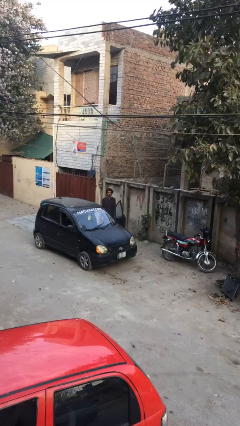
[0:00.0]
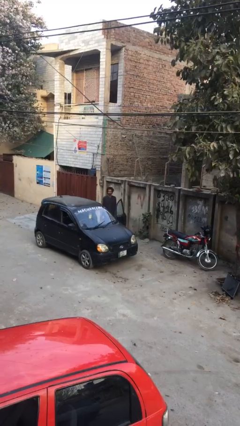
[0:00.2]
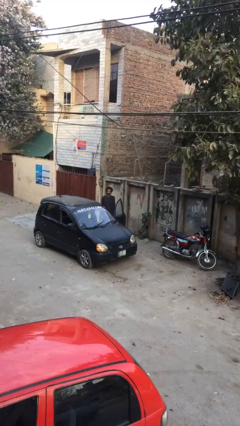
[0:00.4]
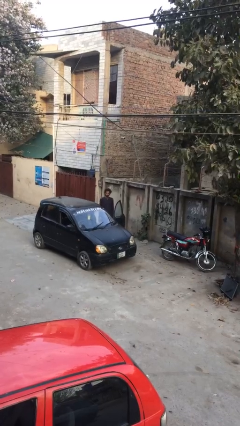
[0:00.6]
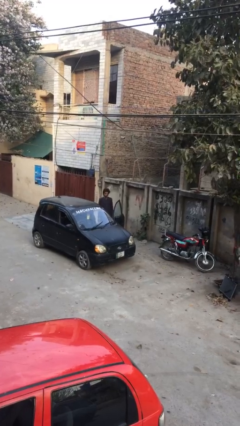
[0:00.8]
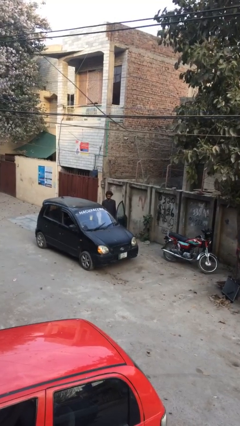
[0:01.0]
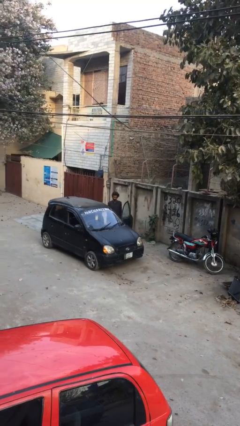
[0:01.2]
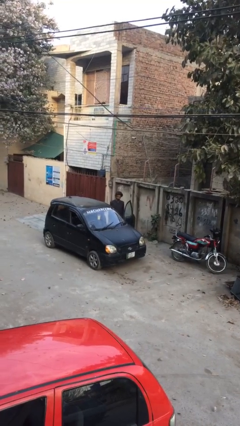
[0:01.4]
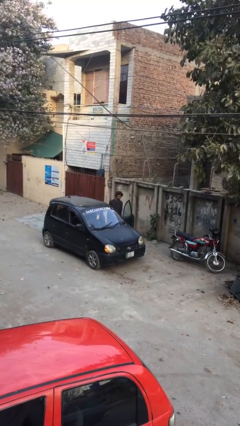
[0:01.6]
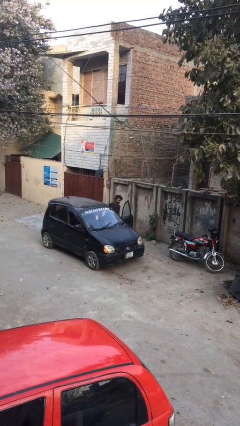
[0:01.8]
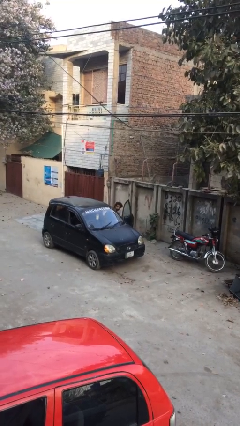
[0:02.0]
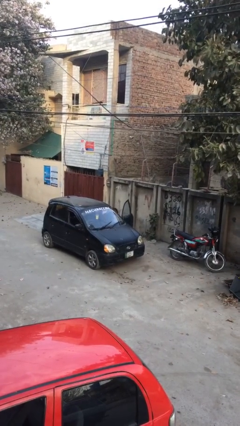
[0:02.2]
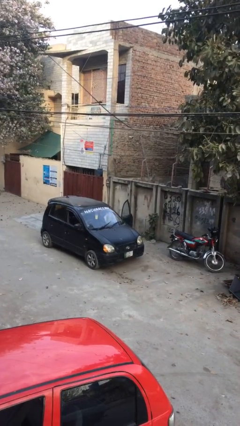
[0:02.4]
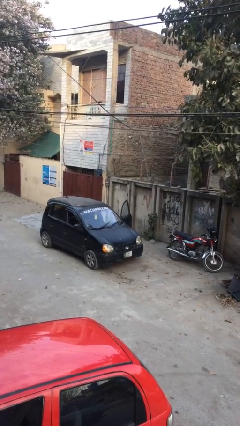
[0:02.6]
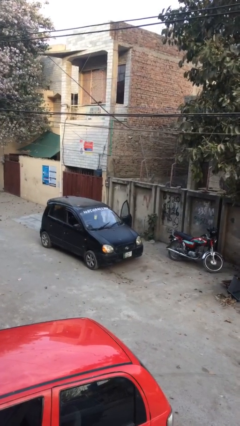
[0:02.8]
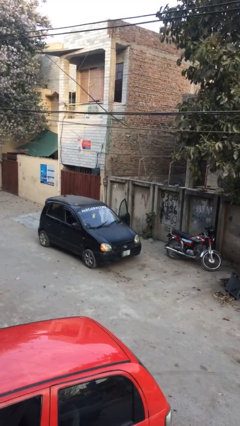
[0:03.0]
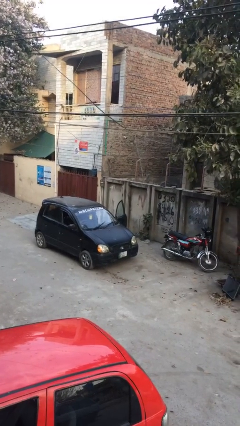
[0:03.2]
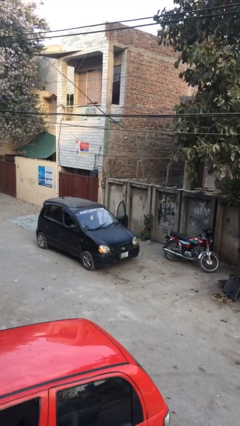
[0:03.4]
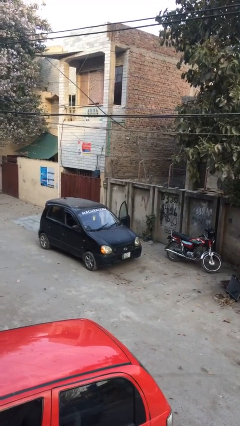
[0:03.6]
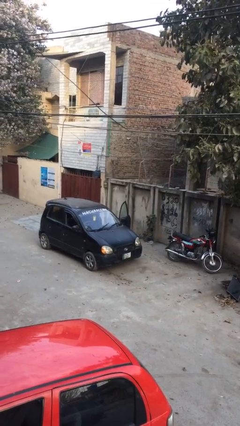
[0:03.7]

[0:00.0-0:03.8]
person enters car

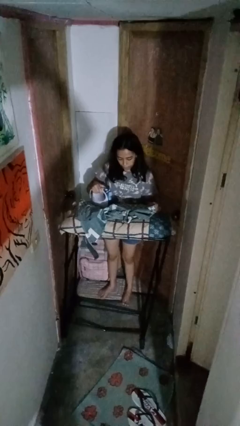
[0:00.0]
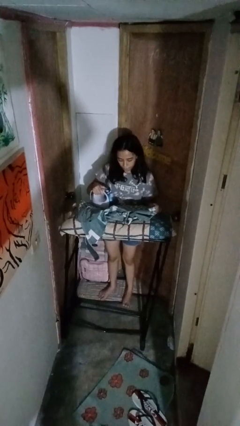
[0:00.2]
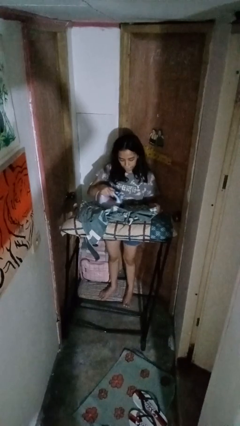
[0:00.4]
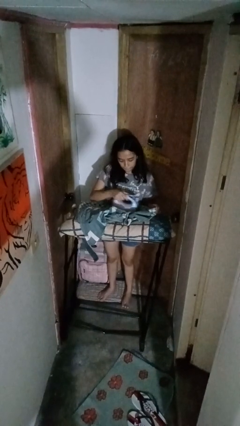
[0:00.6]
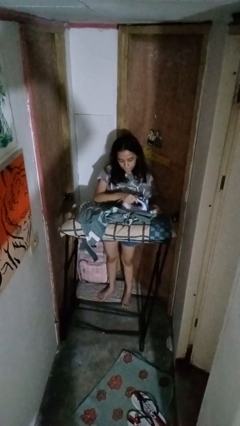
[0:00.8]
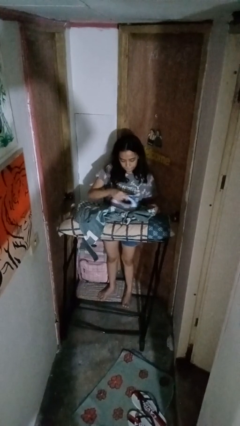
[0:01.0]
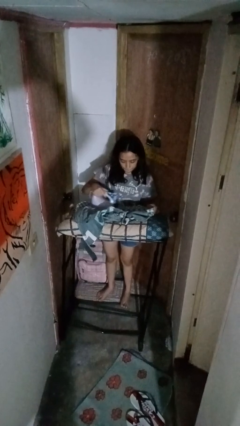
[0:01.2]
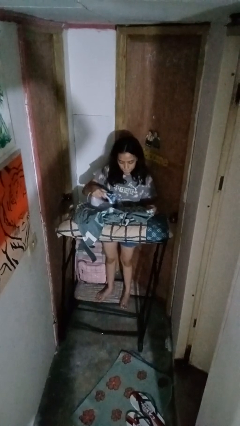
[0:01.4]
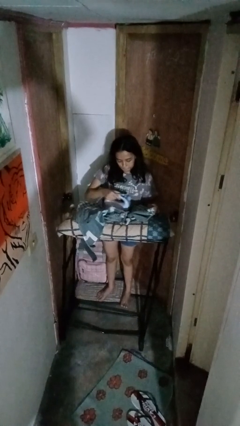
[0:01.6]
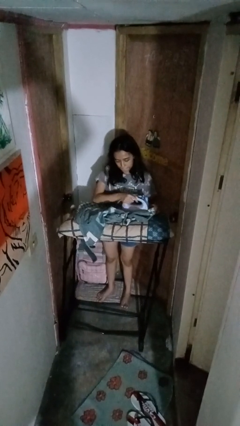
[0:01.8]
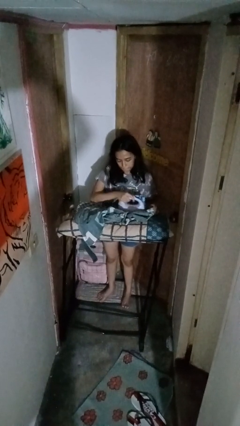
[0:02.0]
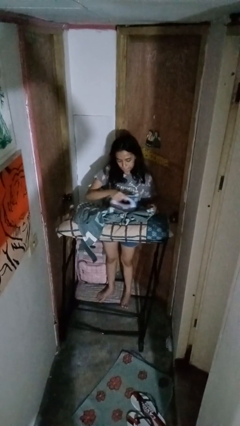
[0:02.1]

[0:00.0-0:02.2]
person irons clothes

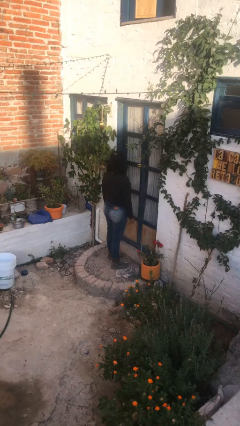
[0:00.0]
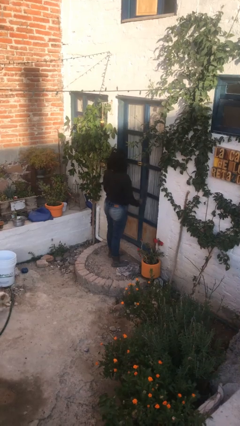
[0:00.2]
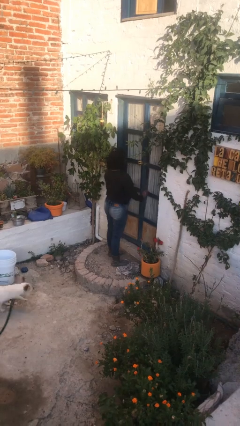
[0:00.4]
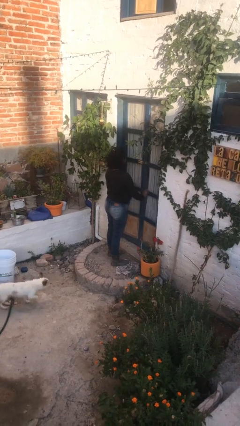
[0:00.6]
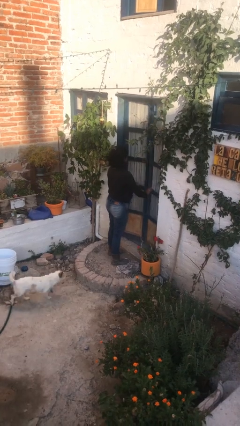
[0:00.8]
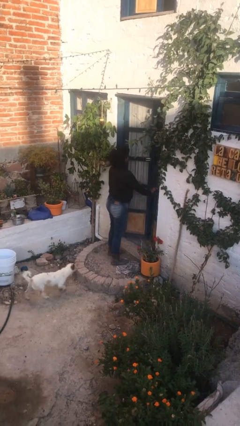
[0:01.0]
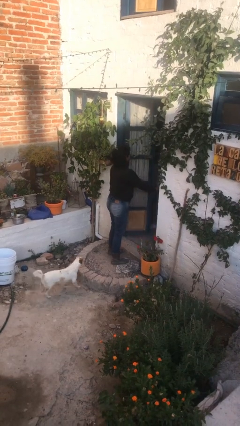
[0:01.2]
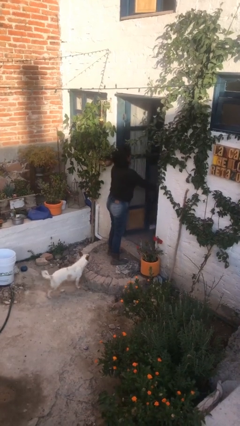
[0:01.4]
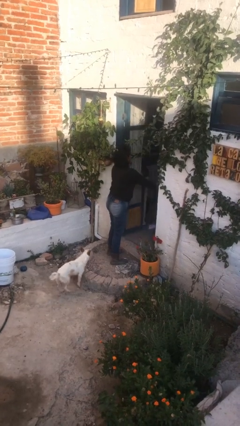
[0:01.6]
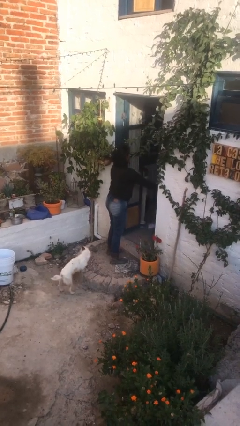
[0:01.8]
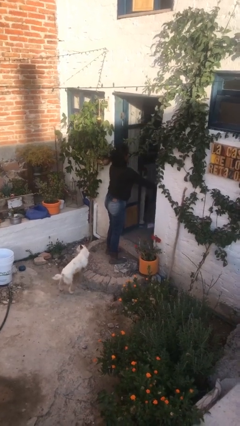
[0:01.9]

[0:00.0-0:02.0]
person opens facility door

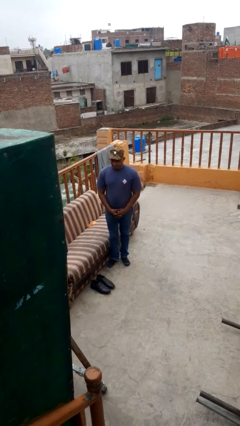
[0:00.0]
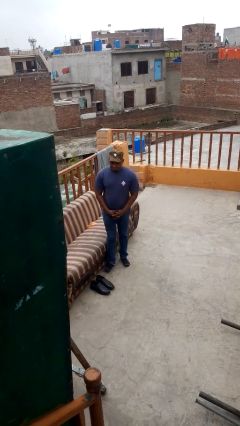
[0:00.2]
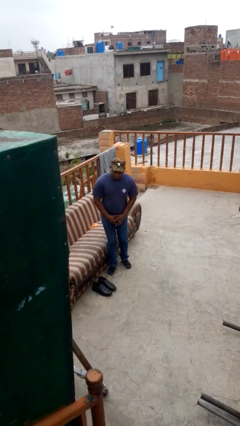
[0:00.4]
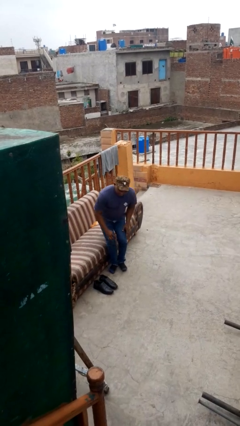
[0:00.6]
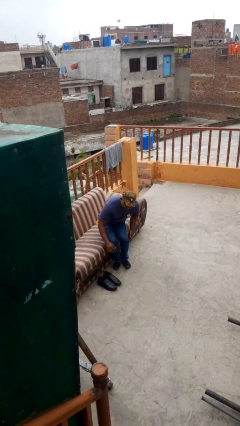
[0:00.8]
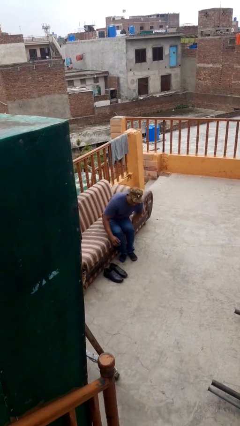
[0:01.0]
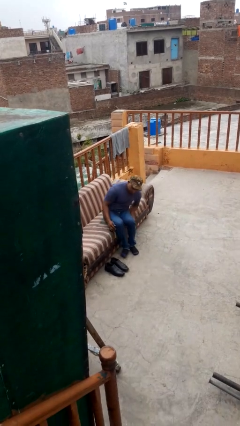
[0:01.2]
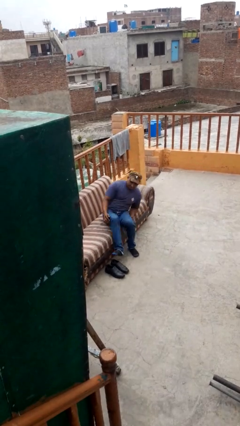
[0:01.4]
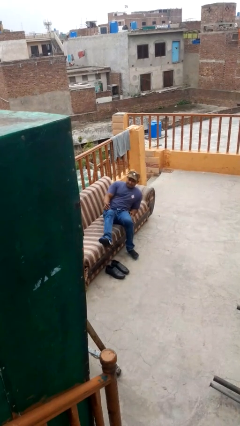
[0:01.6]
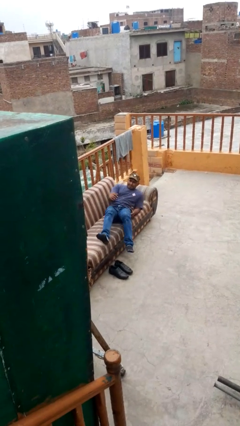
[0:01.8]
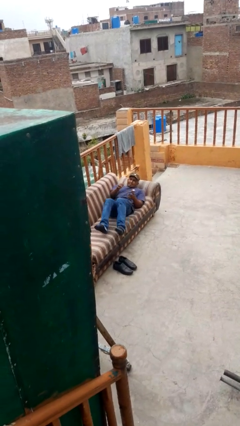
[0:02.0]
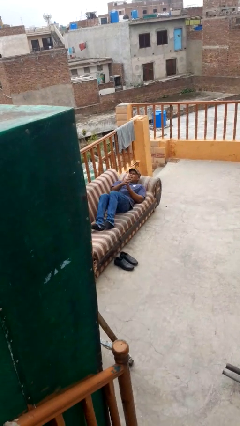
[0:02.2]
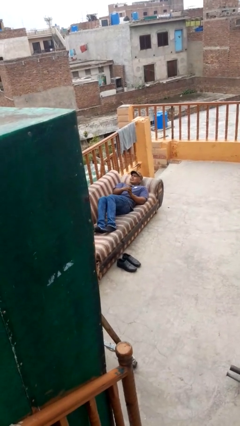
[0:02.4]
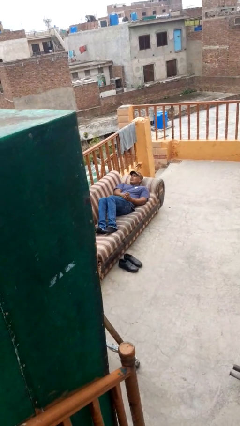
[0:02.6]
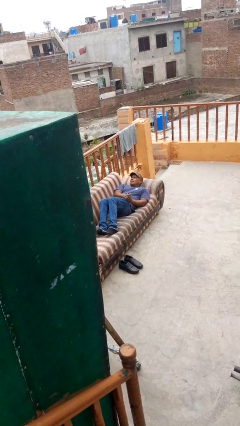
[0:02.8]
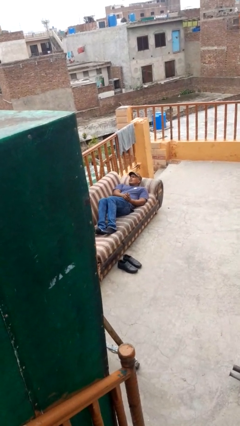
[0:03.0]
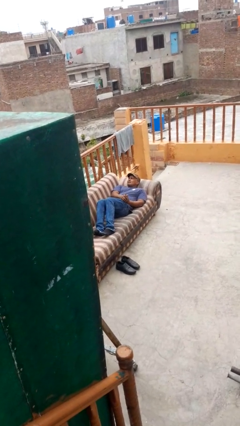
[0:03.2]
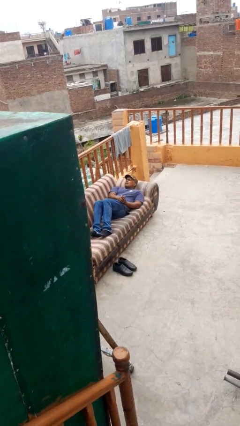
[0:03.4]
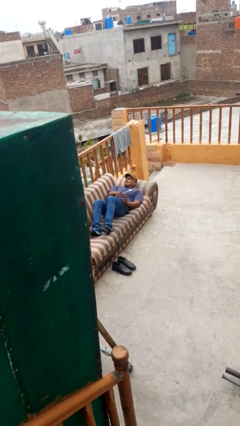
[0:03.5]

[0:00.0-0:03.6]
person lies down on couch

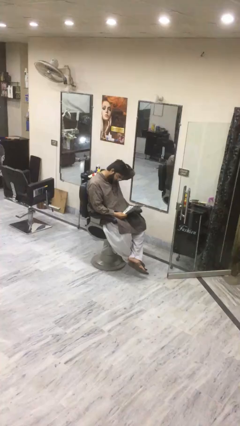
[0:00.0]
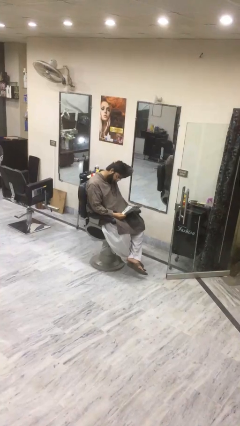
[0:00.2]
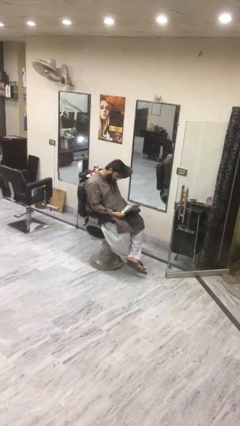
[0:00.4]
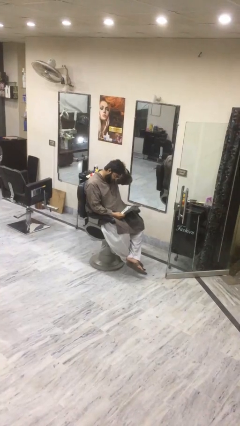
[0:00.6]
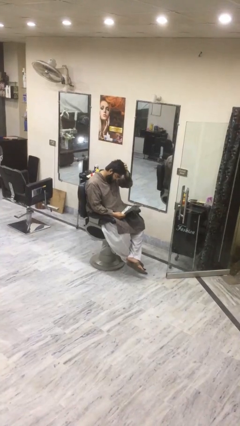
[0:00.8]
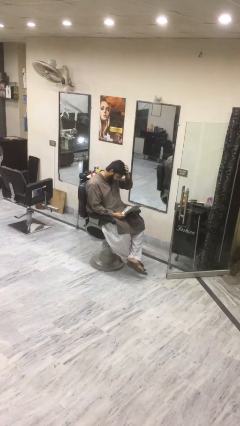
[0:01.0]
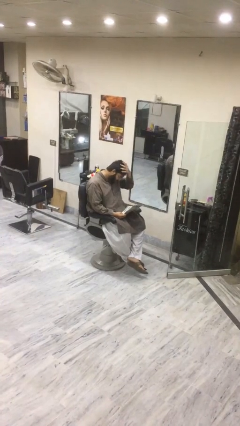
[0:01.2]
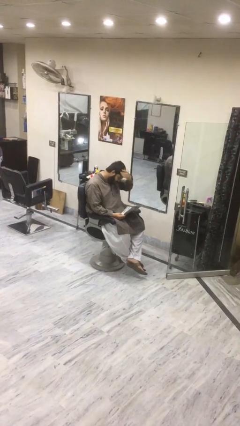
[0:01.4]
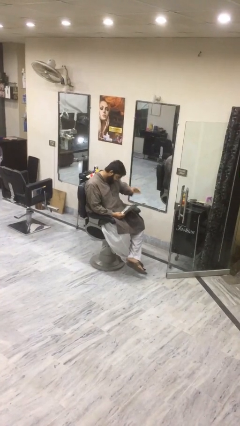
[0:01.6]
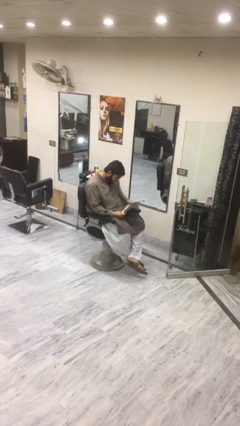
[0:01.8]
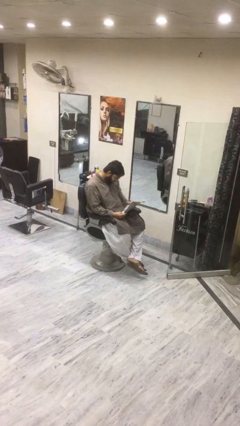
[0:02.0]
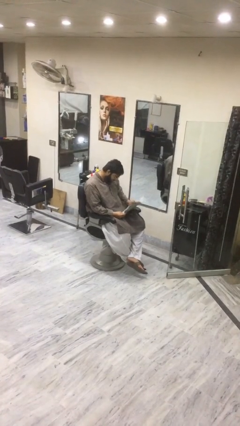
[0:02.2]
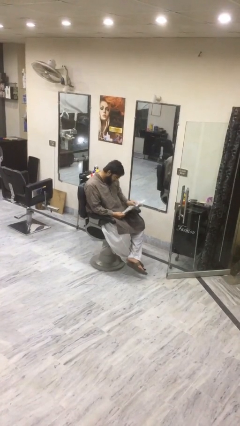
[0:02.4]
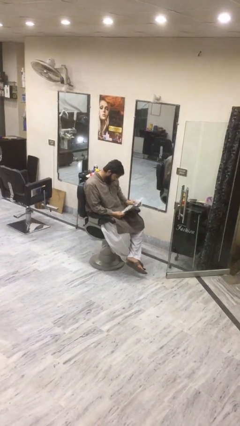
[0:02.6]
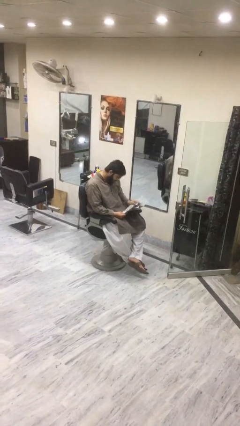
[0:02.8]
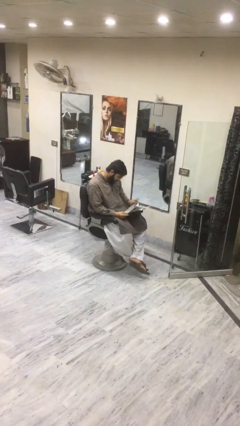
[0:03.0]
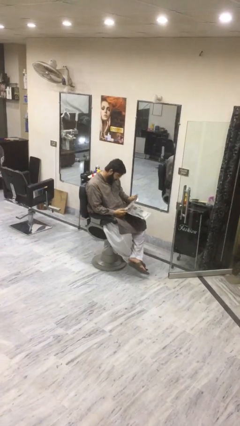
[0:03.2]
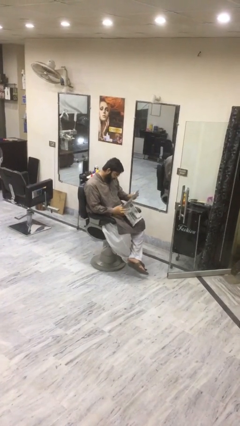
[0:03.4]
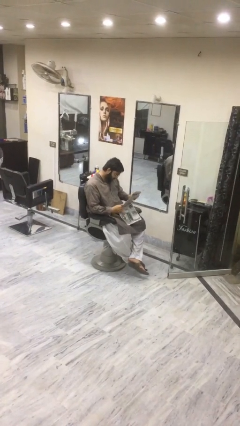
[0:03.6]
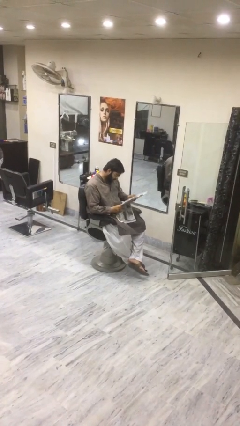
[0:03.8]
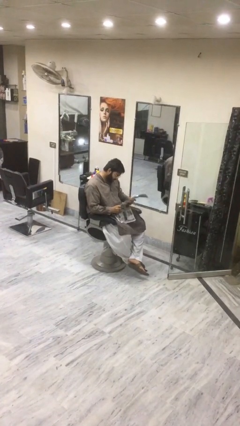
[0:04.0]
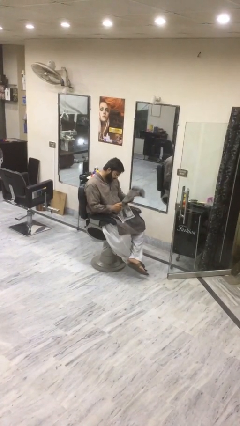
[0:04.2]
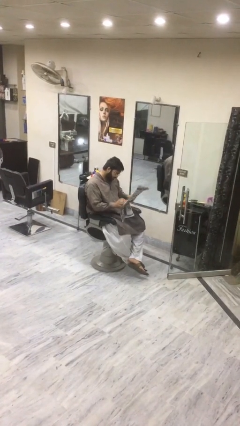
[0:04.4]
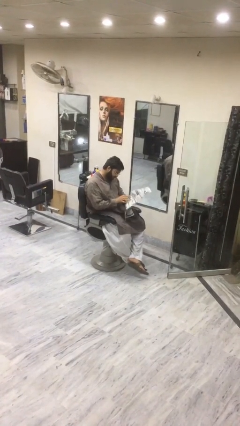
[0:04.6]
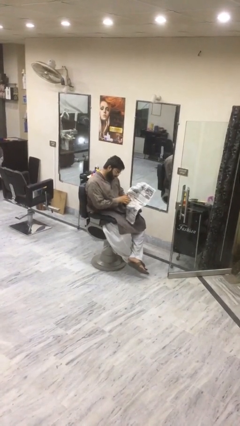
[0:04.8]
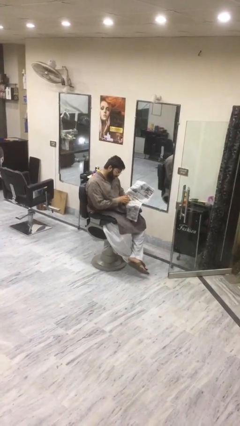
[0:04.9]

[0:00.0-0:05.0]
person reads document

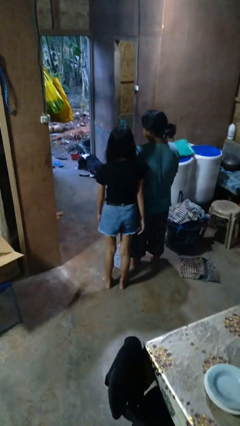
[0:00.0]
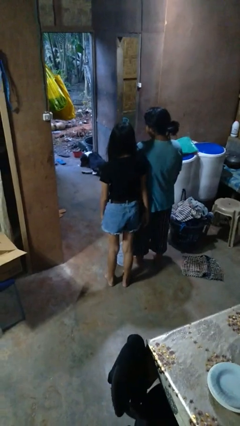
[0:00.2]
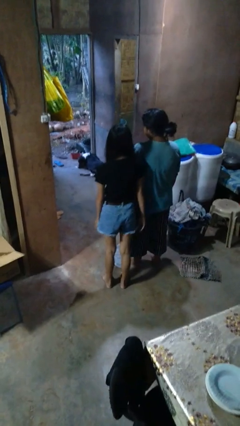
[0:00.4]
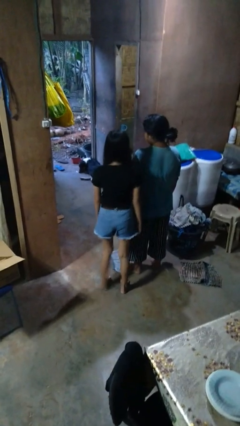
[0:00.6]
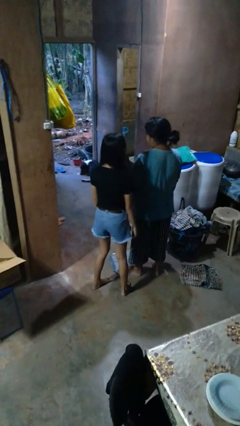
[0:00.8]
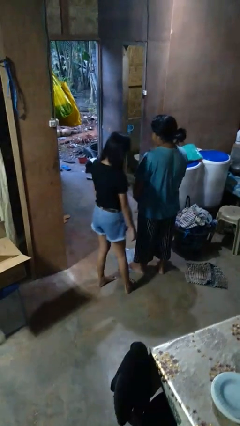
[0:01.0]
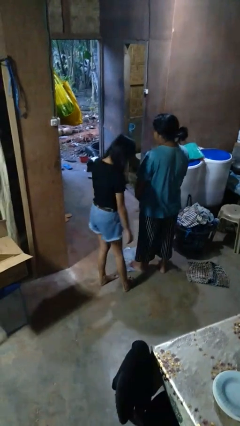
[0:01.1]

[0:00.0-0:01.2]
person bumps into person
